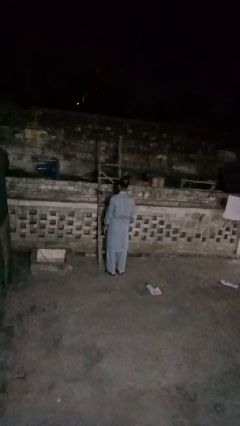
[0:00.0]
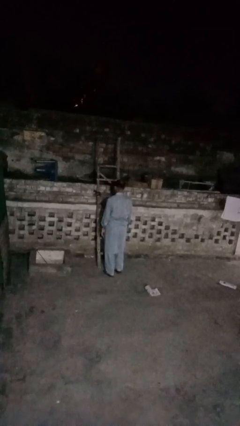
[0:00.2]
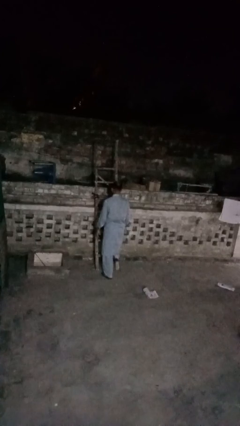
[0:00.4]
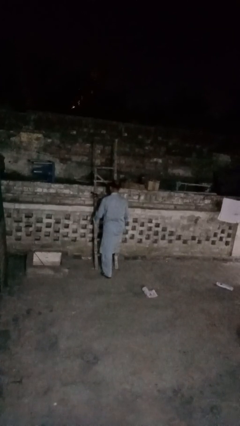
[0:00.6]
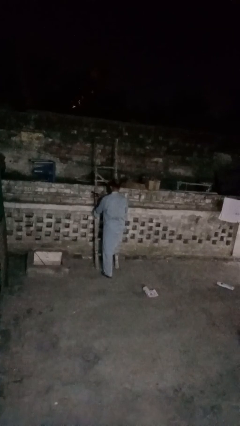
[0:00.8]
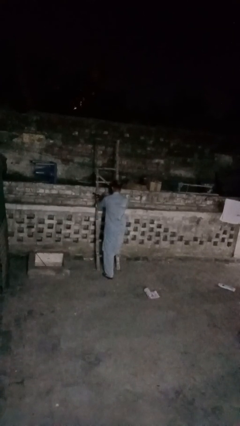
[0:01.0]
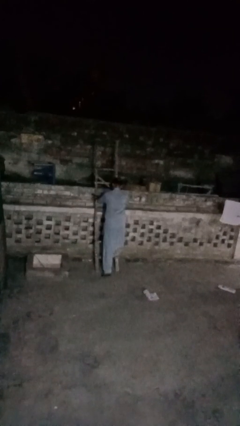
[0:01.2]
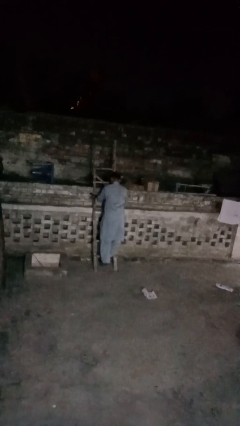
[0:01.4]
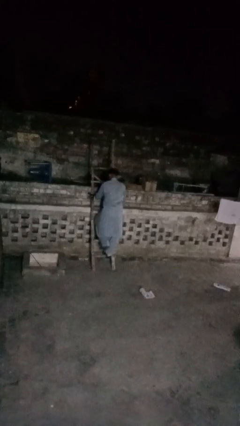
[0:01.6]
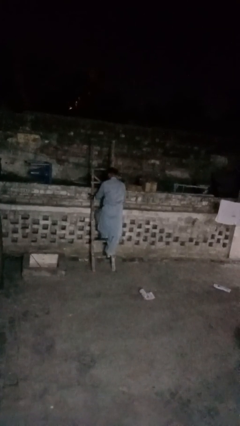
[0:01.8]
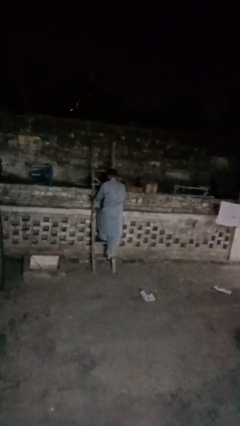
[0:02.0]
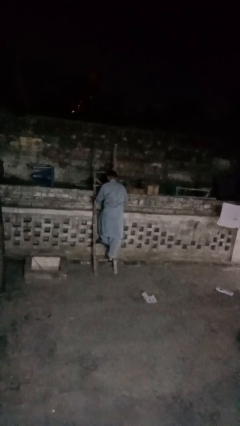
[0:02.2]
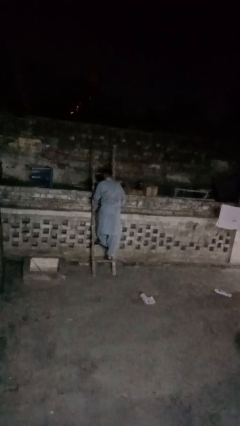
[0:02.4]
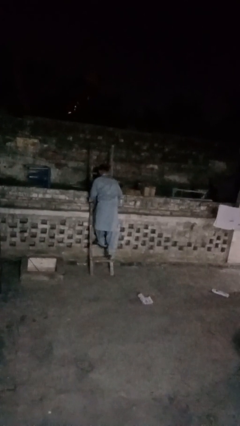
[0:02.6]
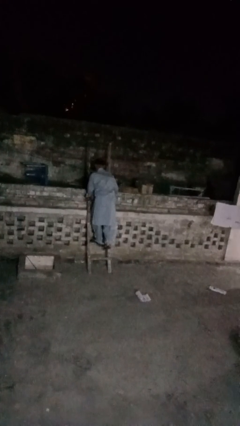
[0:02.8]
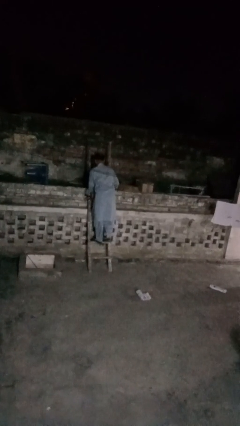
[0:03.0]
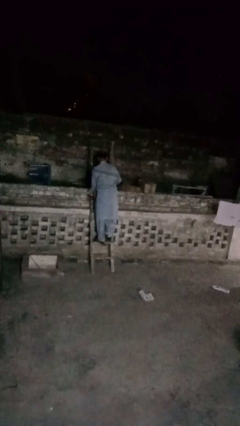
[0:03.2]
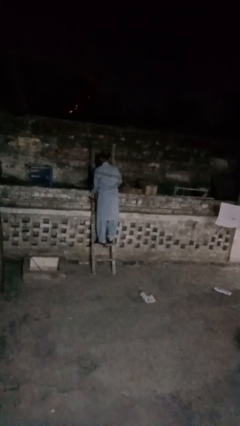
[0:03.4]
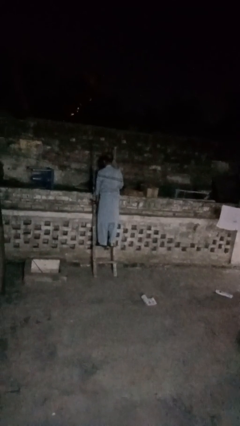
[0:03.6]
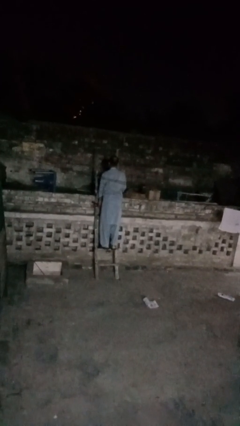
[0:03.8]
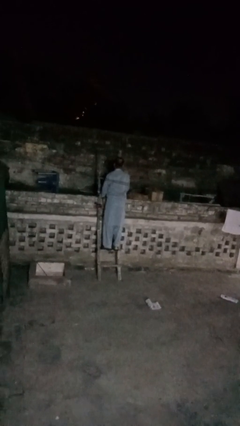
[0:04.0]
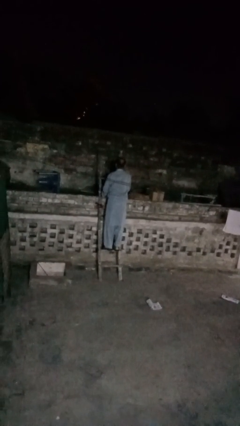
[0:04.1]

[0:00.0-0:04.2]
person climbs up ladder

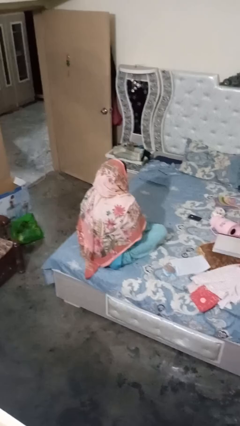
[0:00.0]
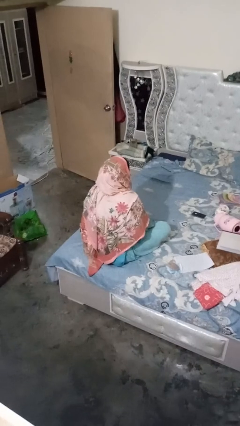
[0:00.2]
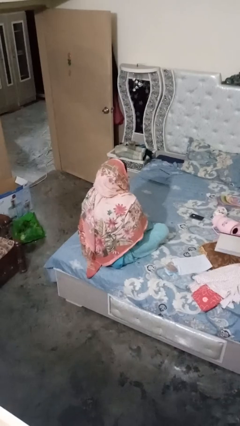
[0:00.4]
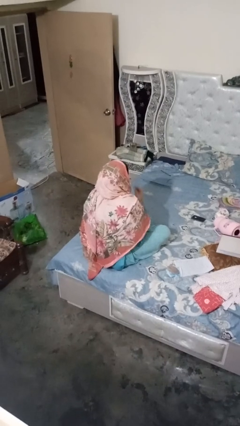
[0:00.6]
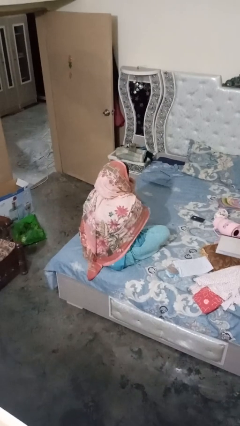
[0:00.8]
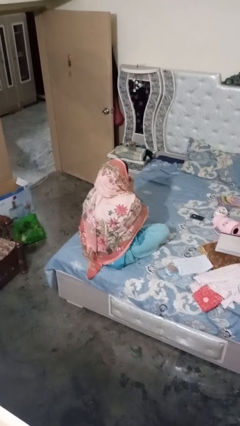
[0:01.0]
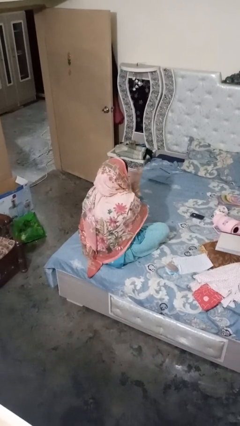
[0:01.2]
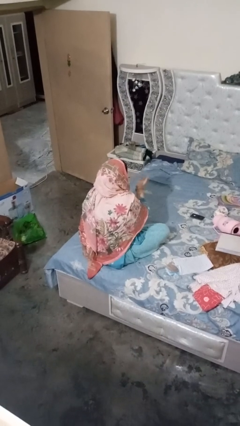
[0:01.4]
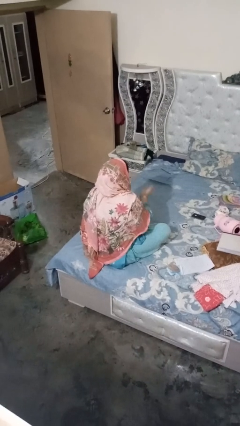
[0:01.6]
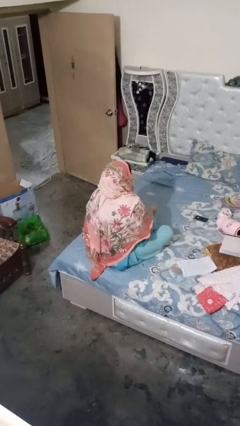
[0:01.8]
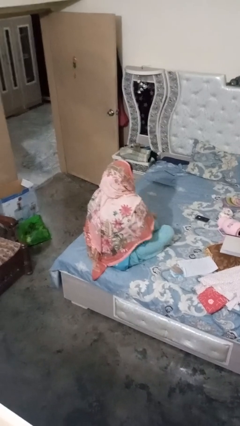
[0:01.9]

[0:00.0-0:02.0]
person gestures blow kiss

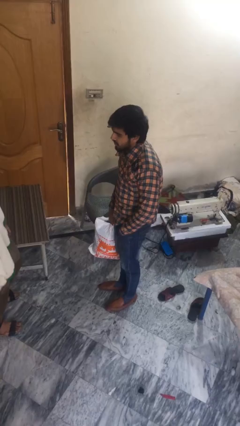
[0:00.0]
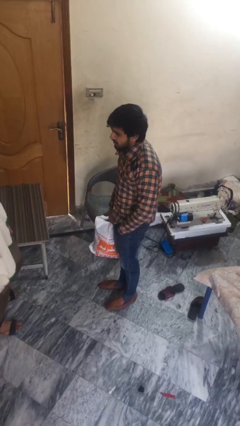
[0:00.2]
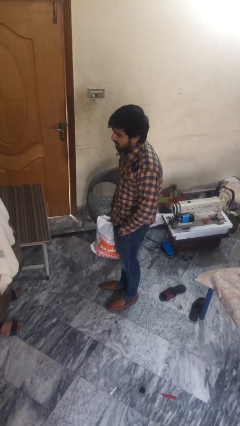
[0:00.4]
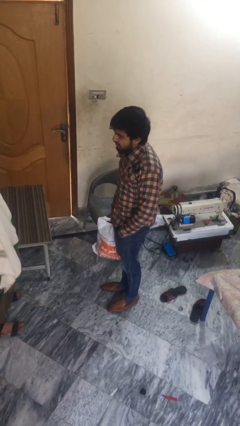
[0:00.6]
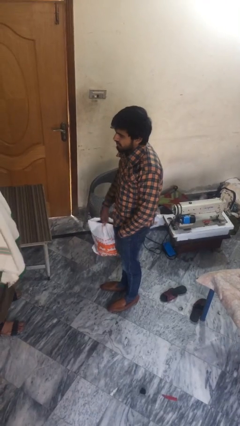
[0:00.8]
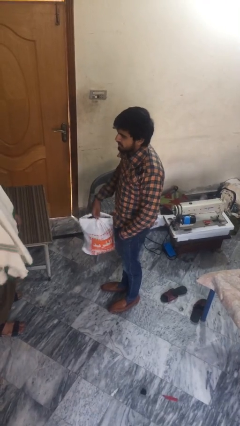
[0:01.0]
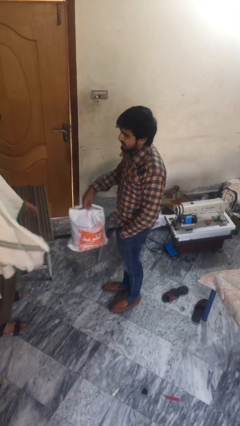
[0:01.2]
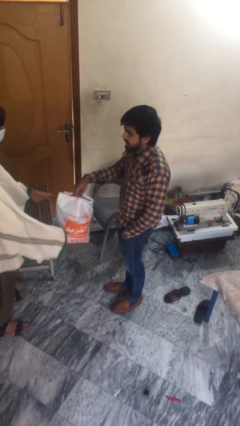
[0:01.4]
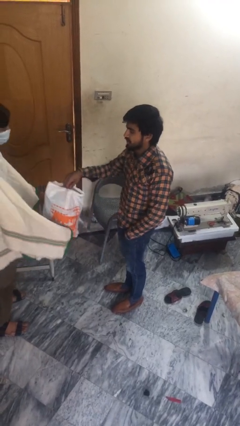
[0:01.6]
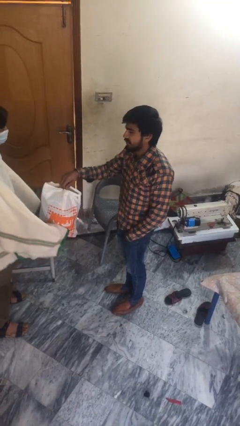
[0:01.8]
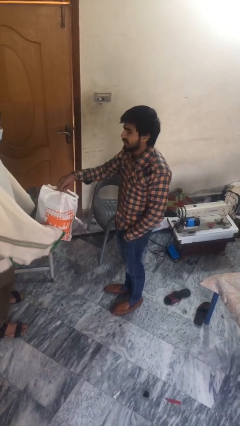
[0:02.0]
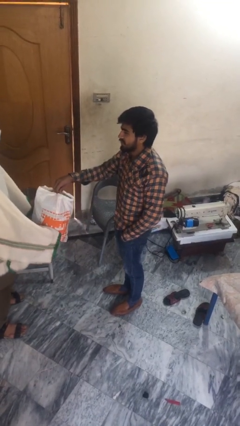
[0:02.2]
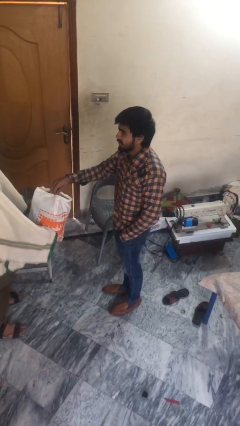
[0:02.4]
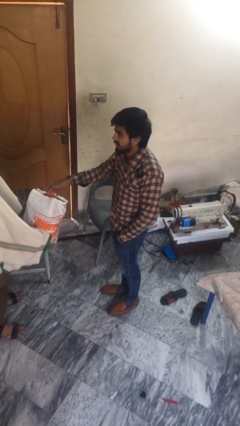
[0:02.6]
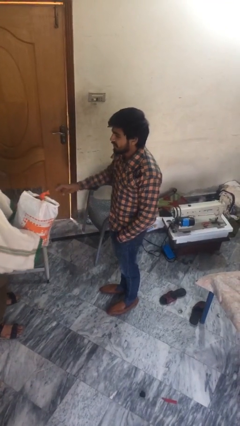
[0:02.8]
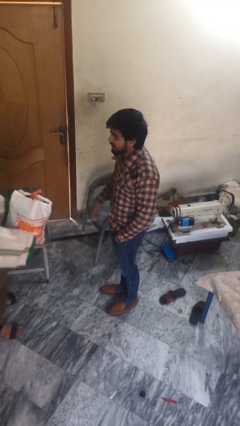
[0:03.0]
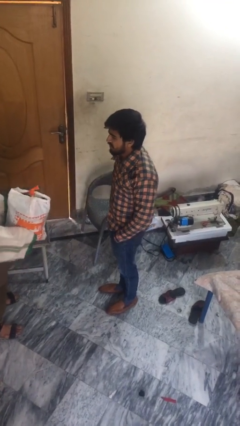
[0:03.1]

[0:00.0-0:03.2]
person transfers object to person

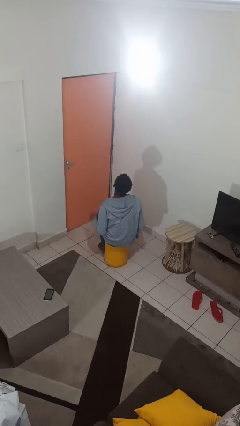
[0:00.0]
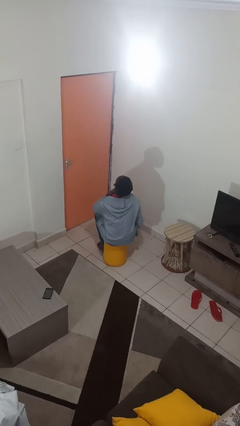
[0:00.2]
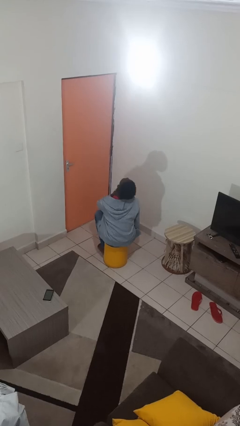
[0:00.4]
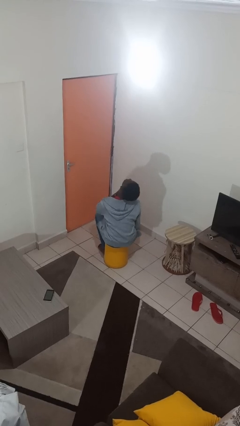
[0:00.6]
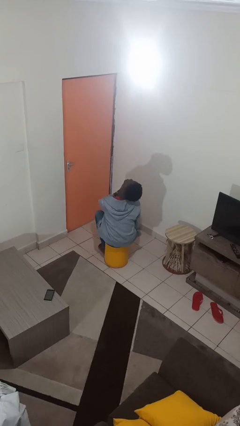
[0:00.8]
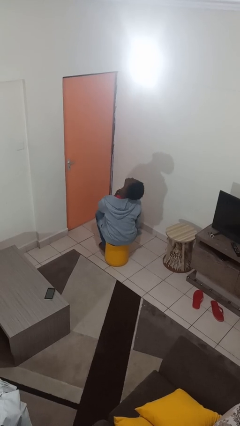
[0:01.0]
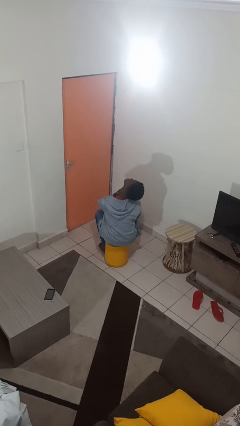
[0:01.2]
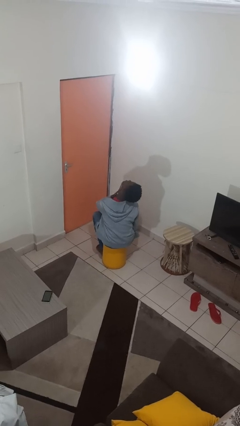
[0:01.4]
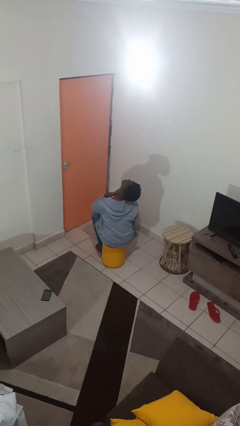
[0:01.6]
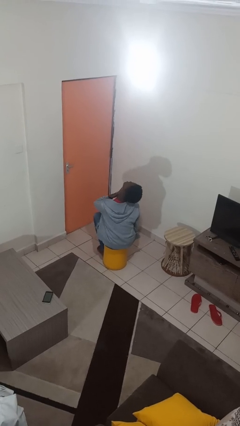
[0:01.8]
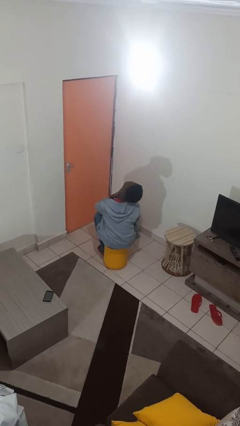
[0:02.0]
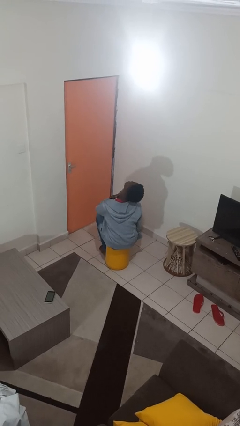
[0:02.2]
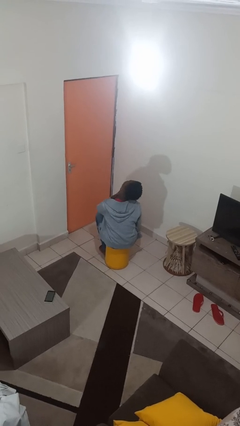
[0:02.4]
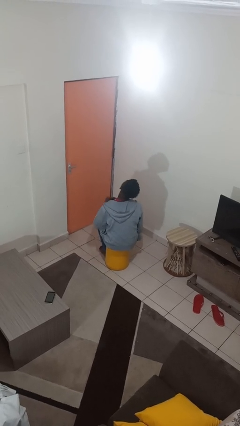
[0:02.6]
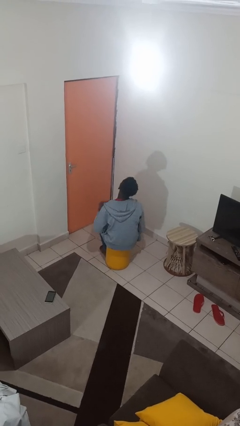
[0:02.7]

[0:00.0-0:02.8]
person rubs neck

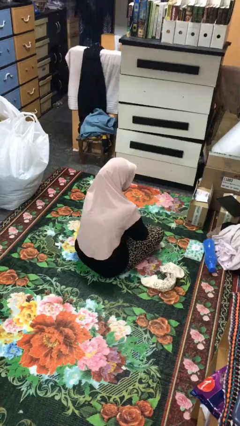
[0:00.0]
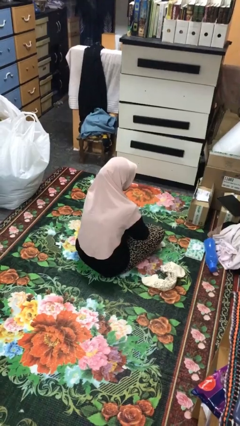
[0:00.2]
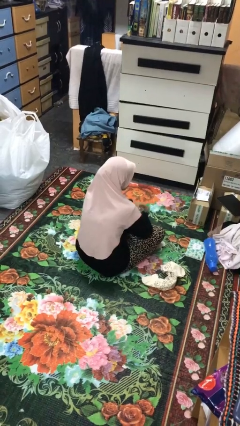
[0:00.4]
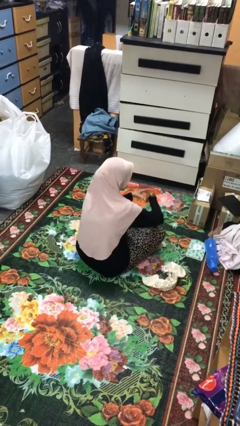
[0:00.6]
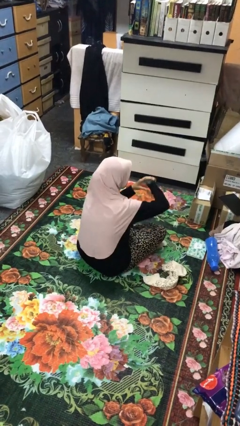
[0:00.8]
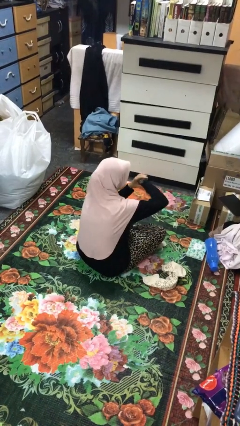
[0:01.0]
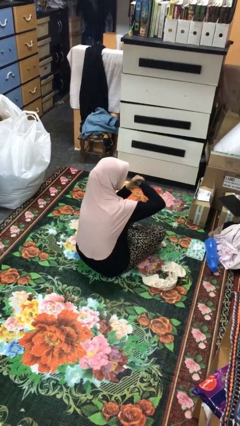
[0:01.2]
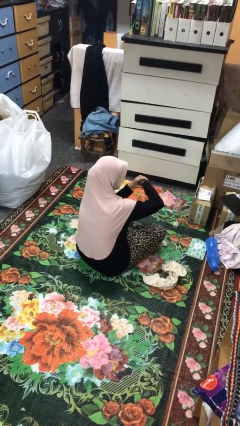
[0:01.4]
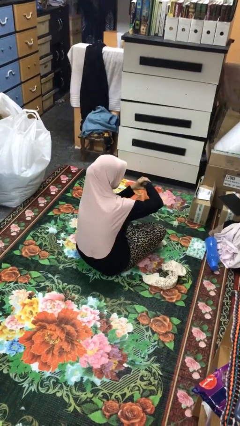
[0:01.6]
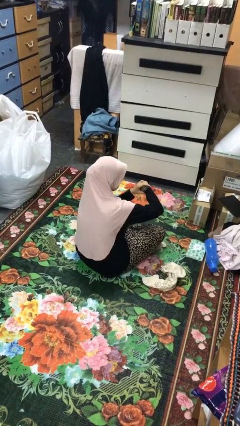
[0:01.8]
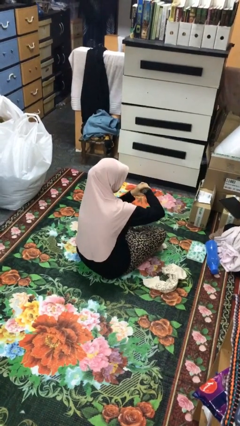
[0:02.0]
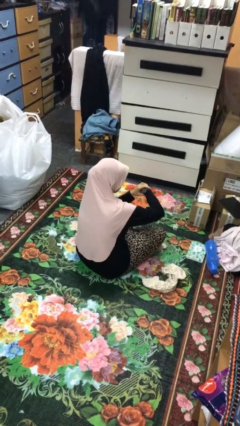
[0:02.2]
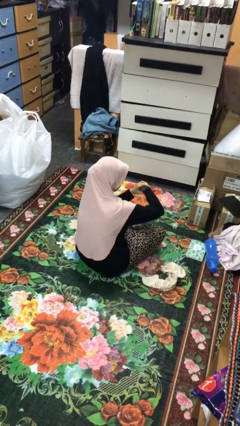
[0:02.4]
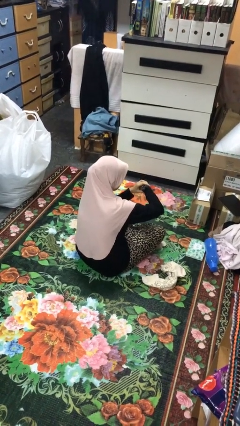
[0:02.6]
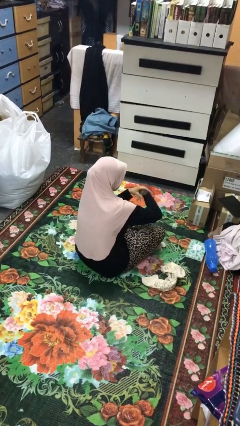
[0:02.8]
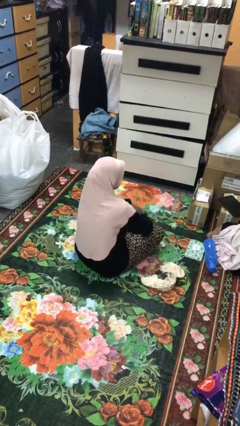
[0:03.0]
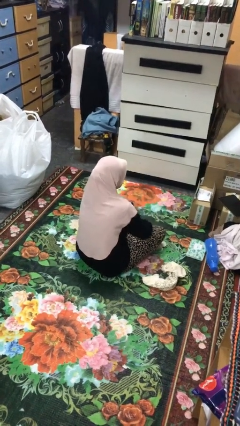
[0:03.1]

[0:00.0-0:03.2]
person looks at wristwatch

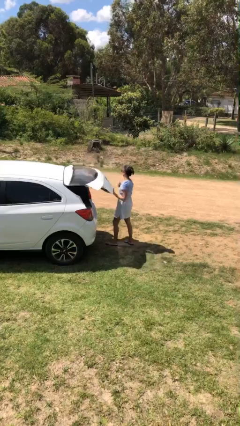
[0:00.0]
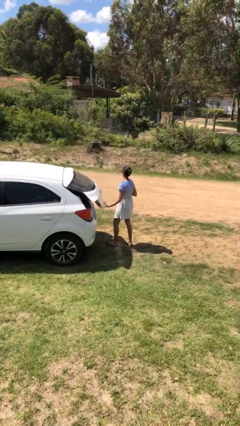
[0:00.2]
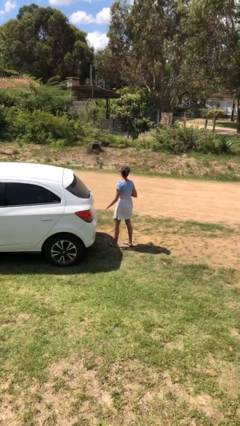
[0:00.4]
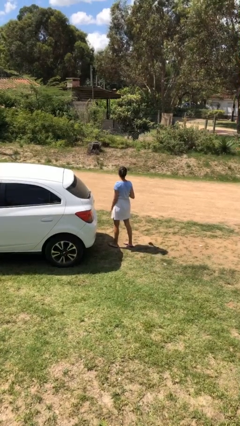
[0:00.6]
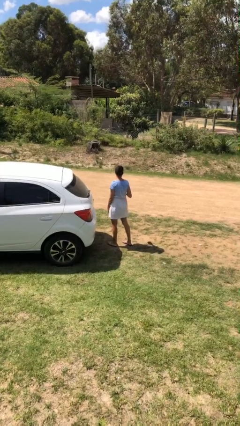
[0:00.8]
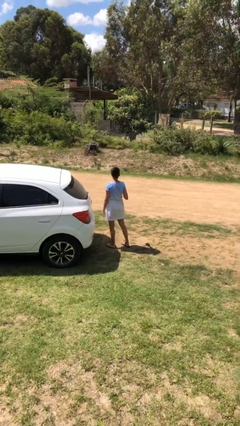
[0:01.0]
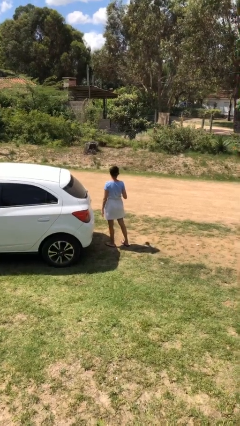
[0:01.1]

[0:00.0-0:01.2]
person closes car trunk

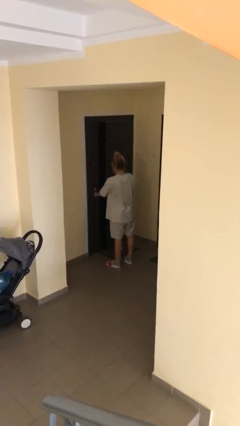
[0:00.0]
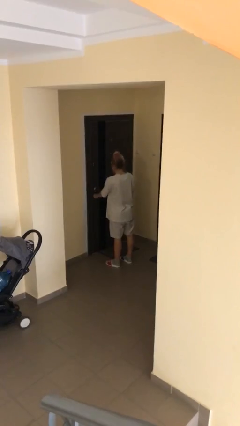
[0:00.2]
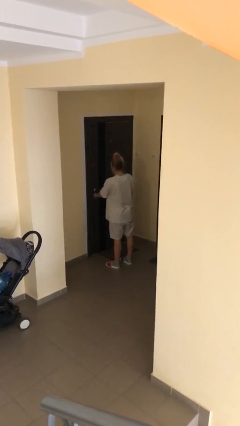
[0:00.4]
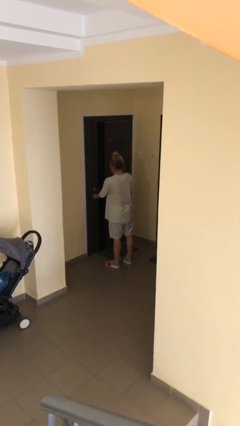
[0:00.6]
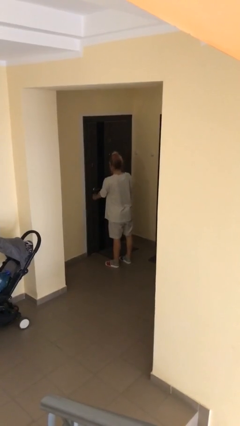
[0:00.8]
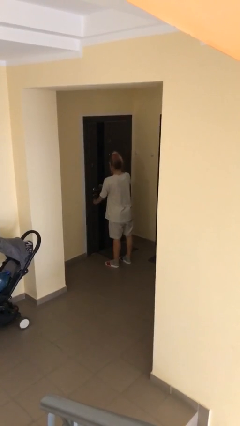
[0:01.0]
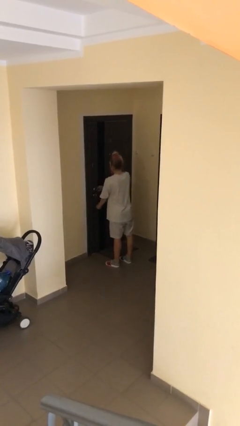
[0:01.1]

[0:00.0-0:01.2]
person unlocks door with keys
